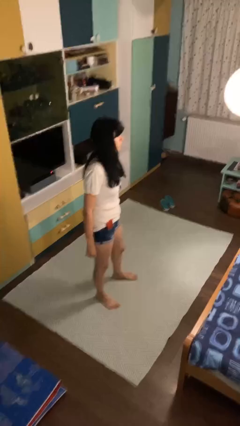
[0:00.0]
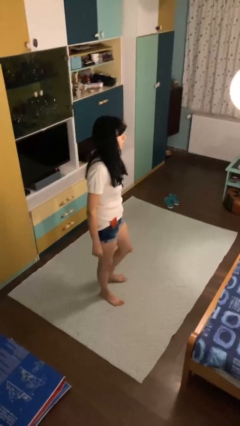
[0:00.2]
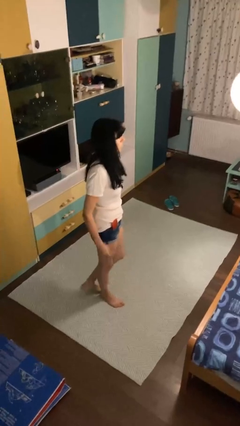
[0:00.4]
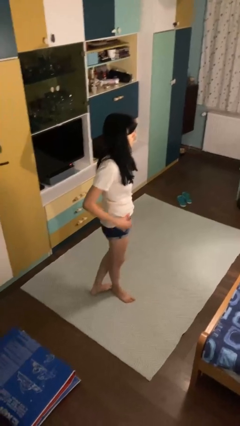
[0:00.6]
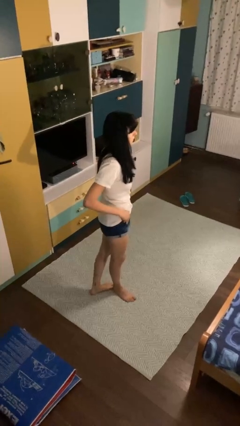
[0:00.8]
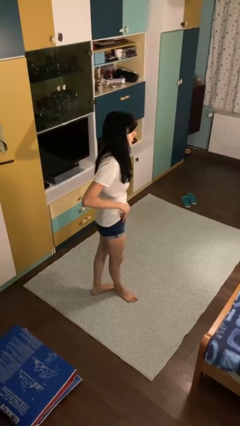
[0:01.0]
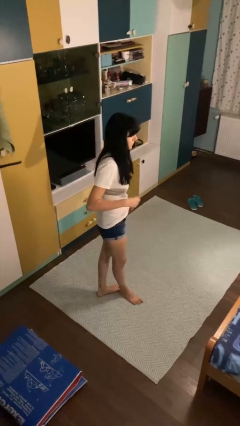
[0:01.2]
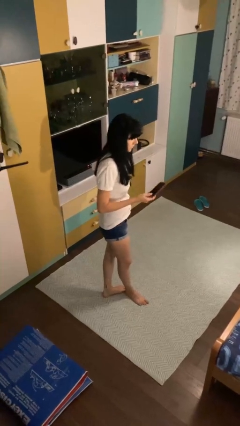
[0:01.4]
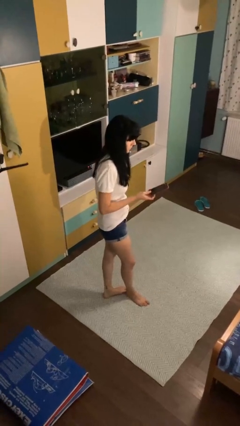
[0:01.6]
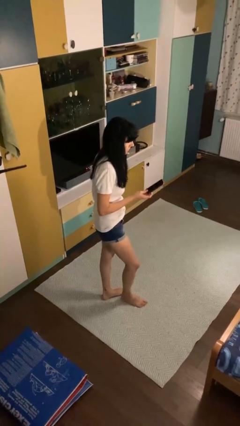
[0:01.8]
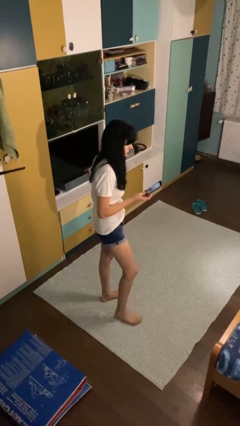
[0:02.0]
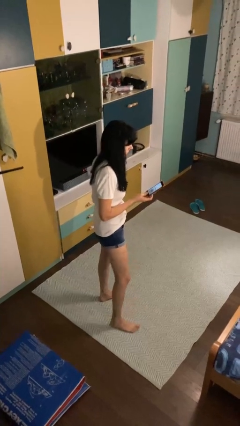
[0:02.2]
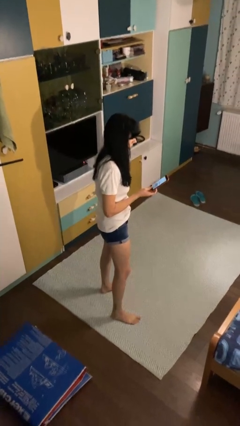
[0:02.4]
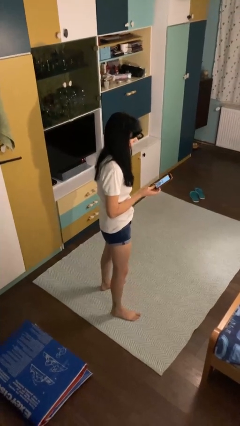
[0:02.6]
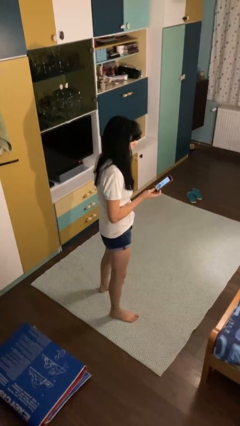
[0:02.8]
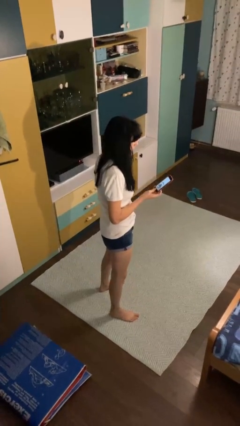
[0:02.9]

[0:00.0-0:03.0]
person takes phone from pocket

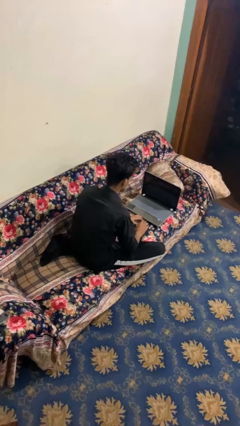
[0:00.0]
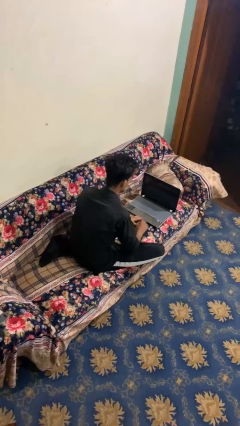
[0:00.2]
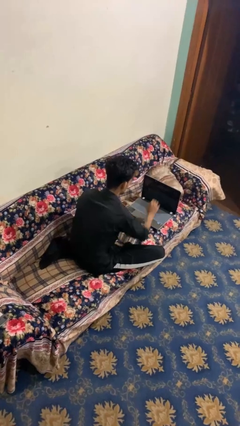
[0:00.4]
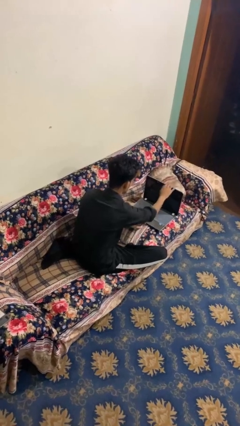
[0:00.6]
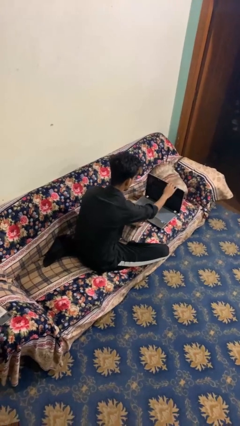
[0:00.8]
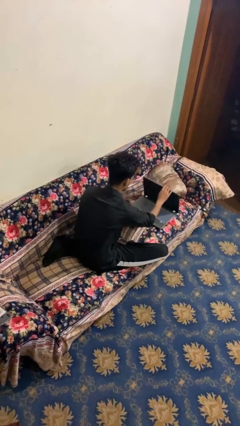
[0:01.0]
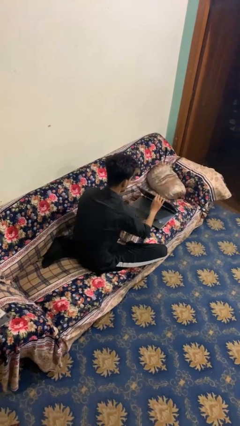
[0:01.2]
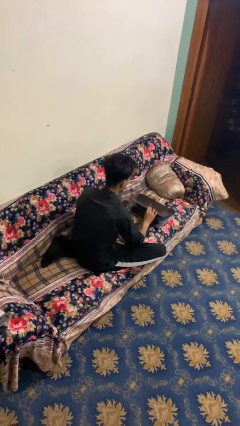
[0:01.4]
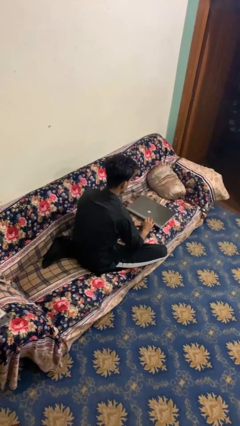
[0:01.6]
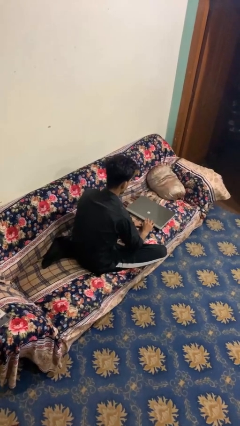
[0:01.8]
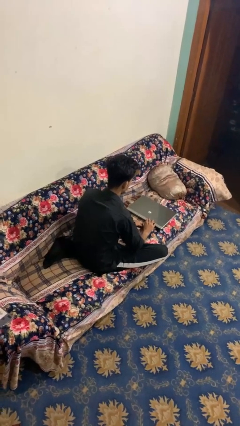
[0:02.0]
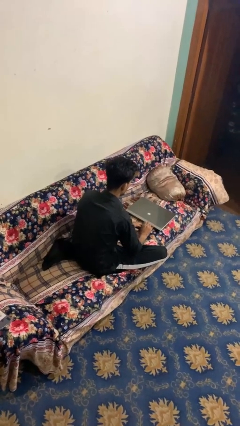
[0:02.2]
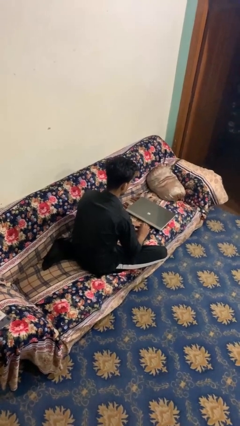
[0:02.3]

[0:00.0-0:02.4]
person closes laptop

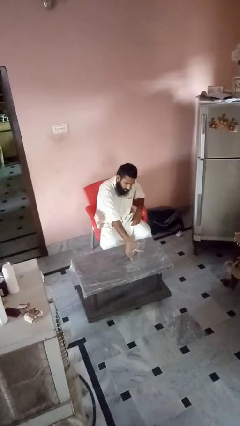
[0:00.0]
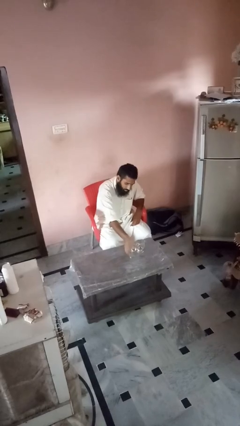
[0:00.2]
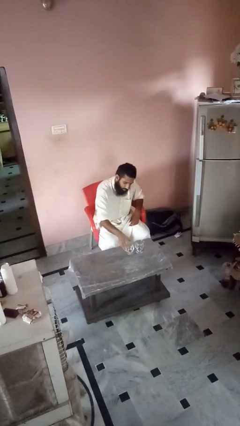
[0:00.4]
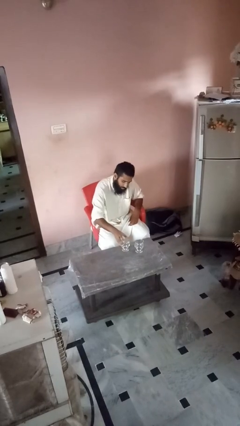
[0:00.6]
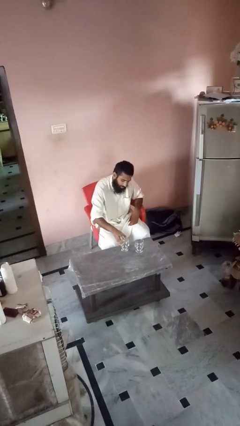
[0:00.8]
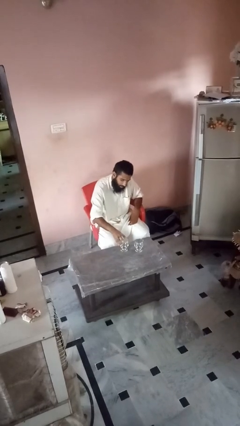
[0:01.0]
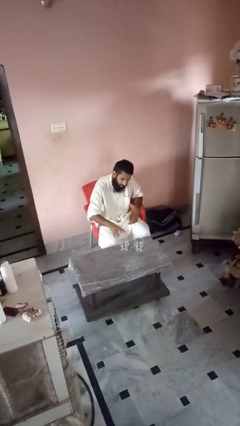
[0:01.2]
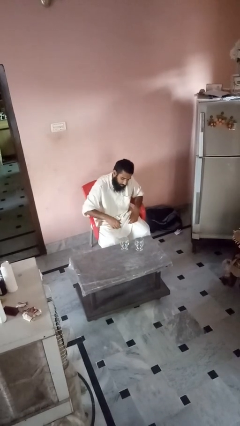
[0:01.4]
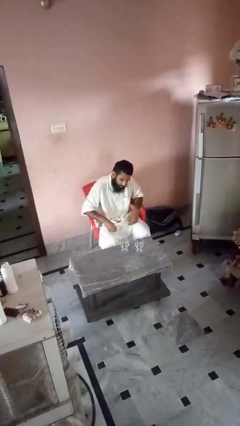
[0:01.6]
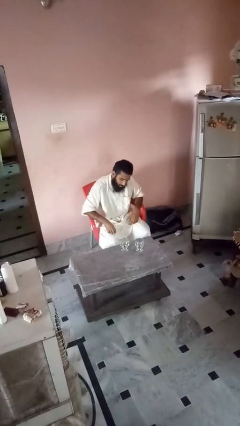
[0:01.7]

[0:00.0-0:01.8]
person sets upright glass

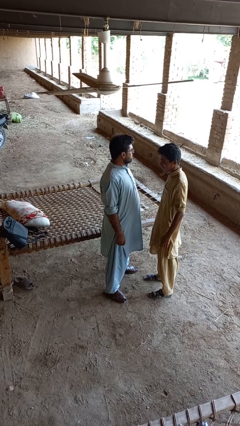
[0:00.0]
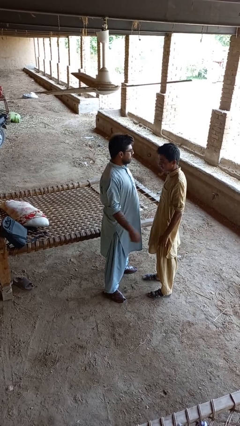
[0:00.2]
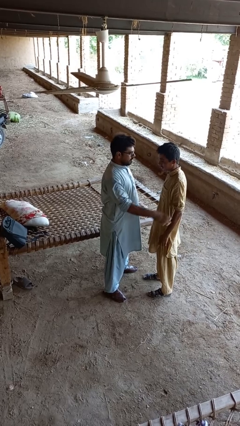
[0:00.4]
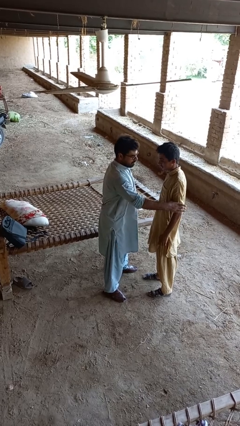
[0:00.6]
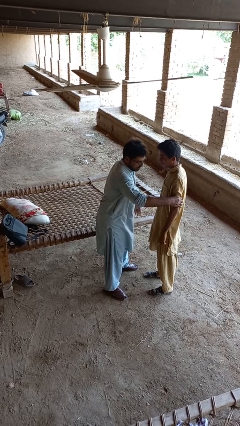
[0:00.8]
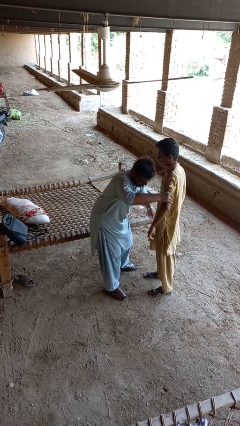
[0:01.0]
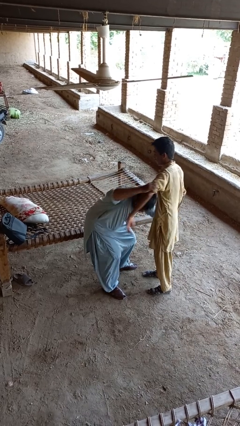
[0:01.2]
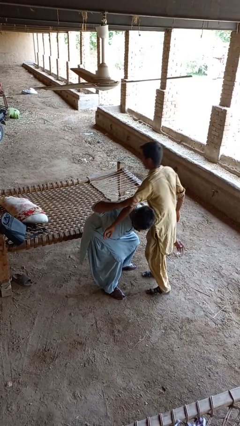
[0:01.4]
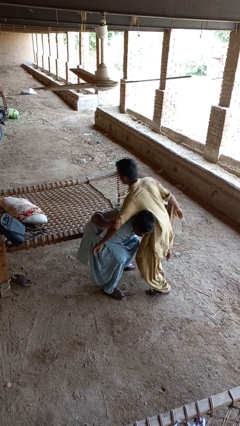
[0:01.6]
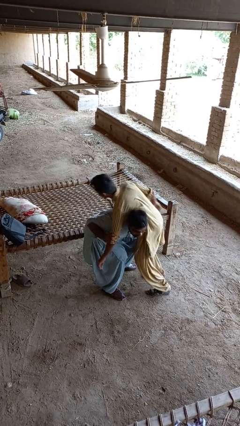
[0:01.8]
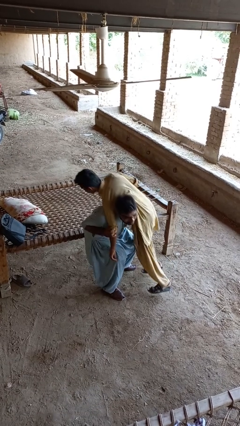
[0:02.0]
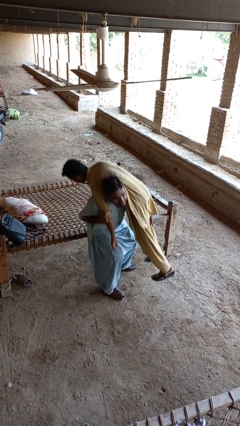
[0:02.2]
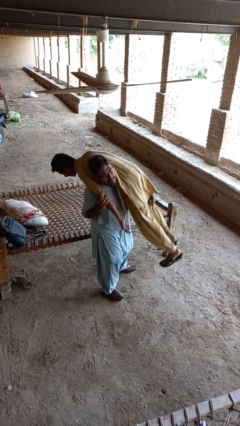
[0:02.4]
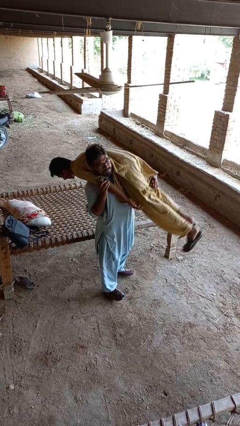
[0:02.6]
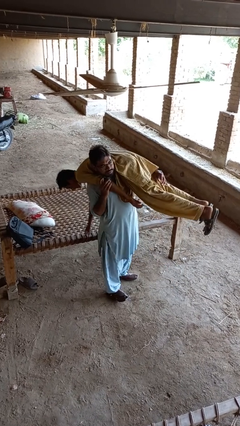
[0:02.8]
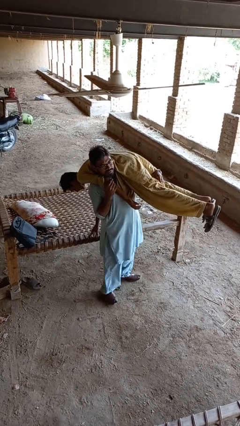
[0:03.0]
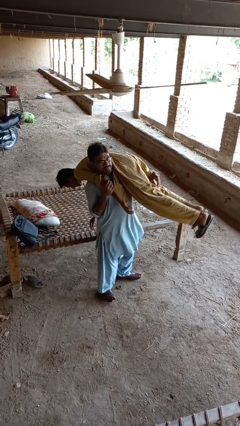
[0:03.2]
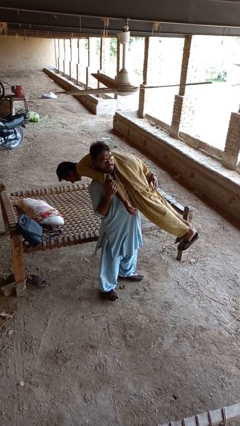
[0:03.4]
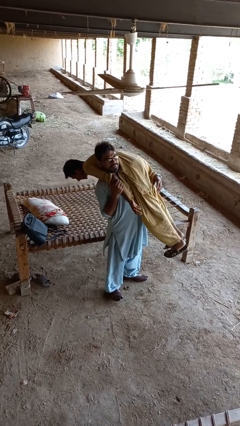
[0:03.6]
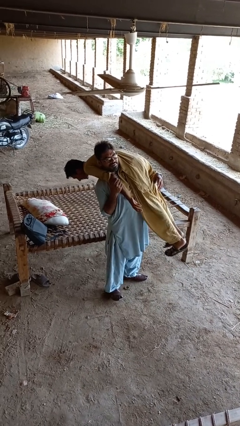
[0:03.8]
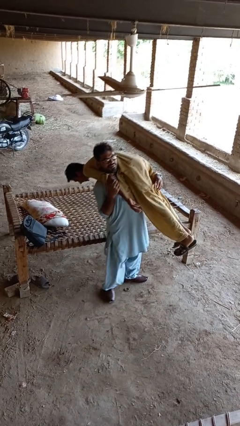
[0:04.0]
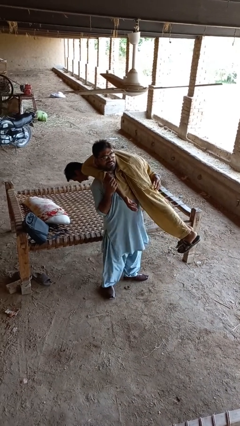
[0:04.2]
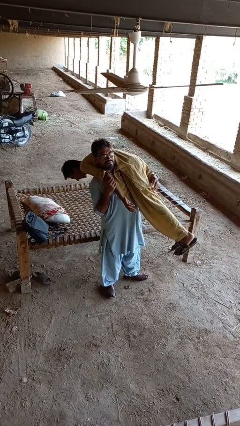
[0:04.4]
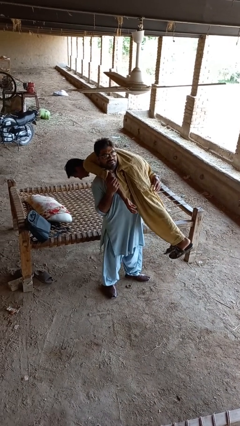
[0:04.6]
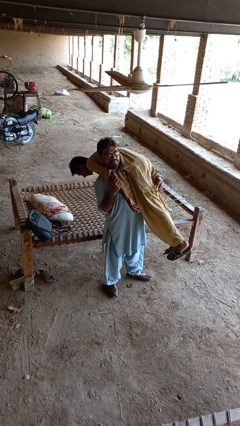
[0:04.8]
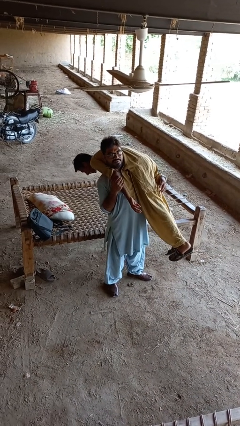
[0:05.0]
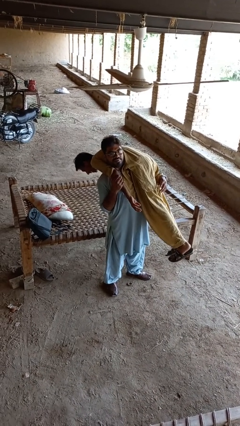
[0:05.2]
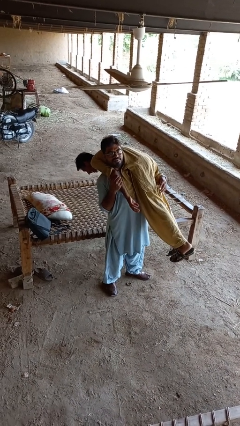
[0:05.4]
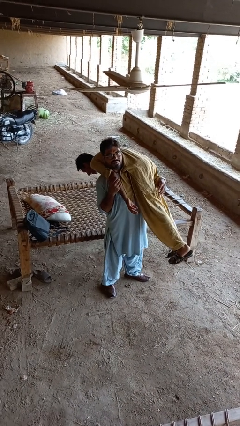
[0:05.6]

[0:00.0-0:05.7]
person carries person over shoulder

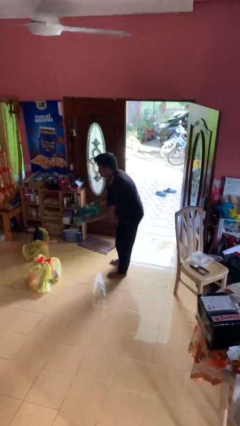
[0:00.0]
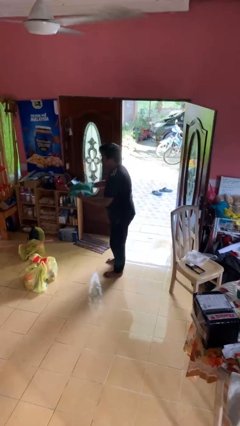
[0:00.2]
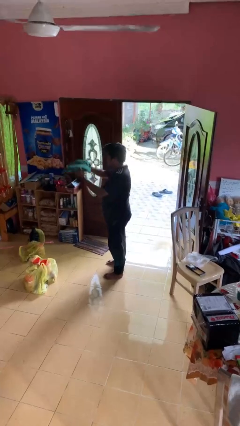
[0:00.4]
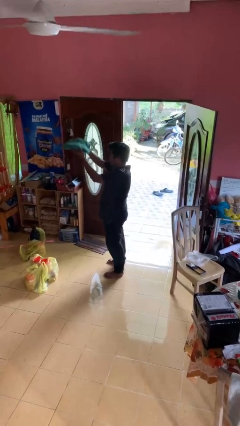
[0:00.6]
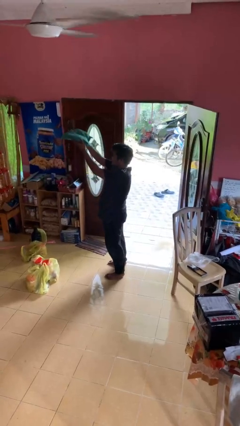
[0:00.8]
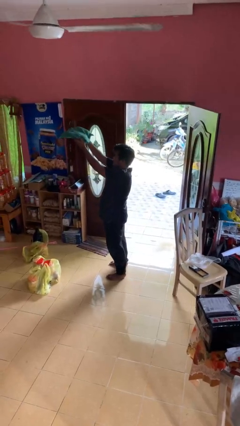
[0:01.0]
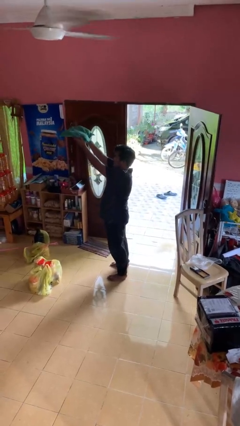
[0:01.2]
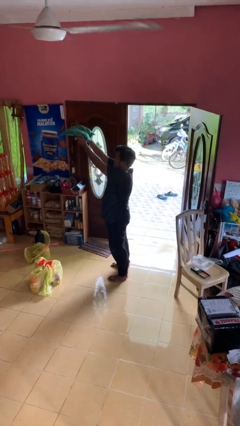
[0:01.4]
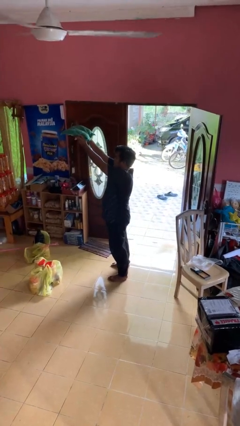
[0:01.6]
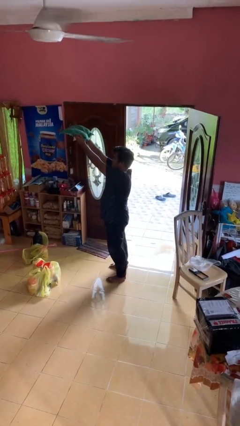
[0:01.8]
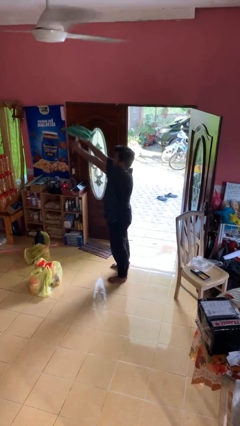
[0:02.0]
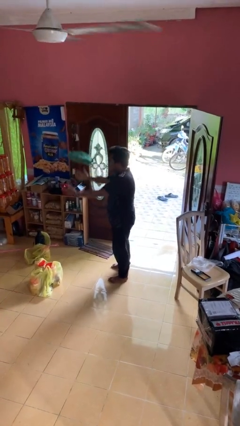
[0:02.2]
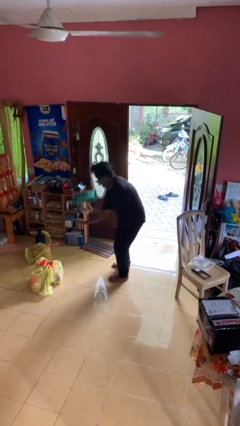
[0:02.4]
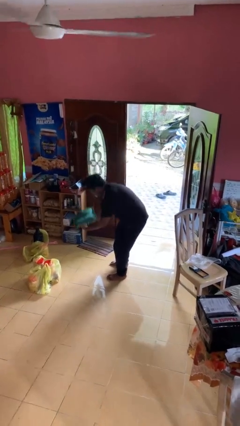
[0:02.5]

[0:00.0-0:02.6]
person drops object

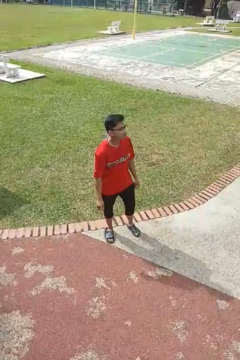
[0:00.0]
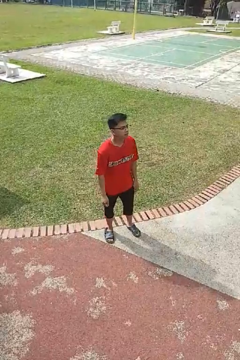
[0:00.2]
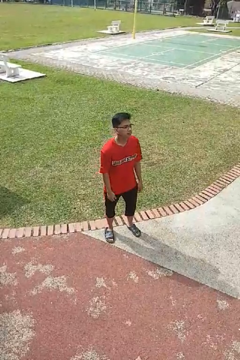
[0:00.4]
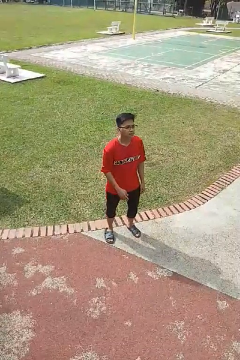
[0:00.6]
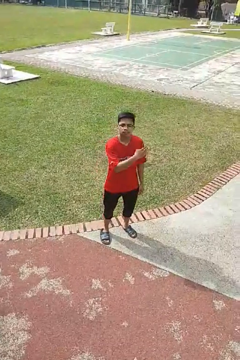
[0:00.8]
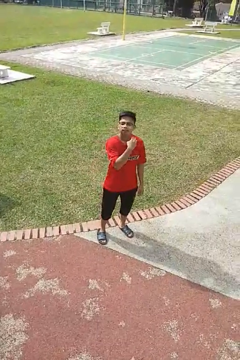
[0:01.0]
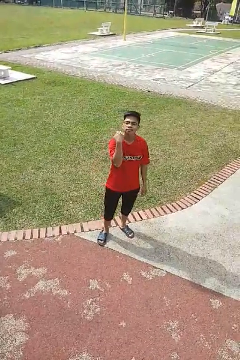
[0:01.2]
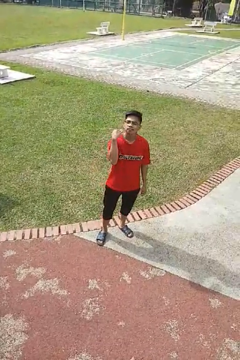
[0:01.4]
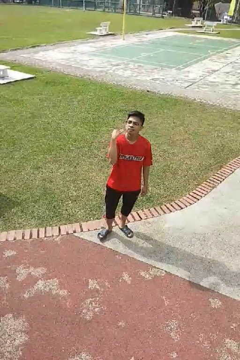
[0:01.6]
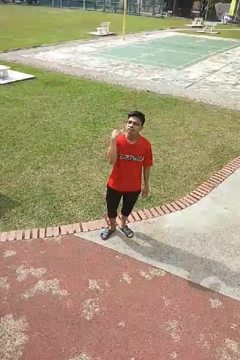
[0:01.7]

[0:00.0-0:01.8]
person gestures cut

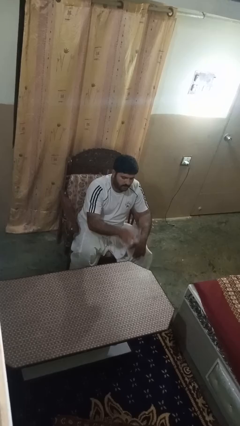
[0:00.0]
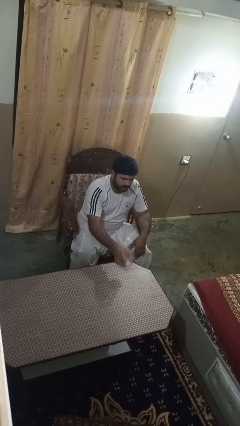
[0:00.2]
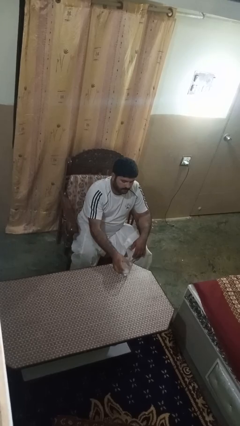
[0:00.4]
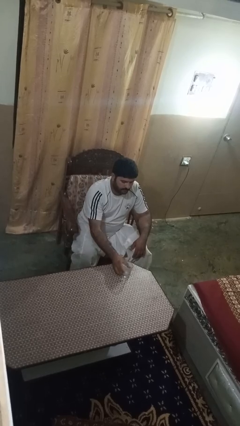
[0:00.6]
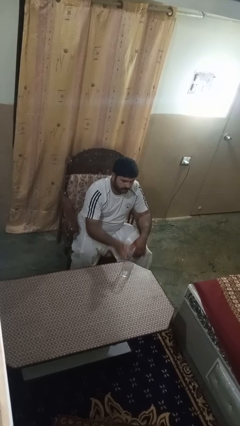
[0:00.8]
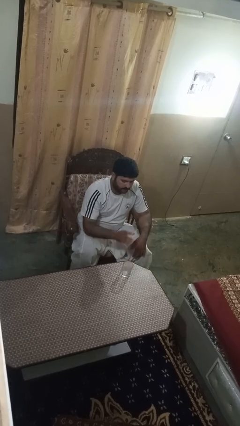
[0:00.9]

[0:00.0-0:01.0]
person puts down object on table
